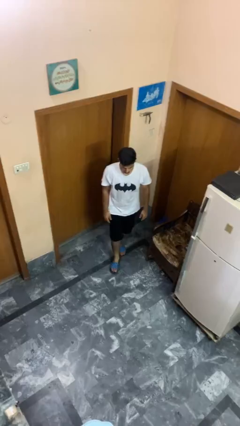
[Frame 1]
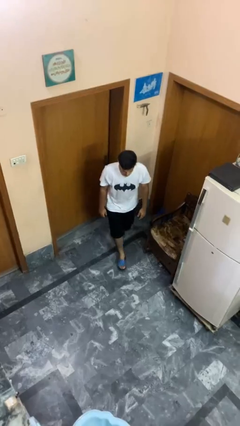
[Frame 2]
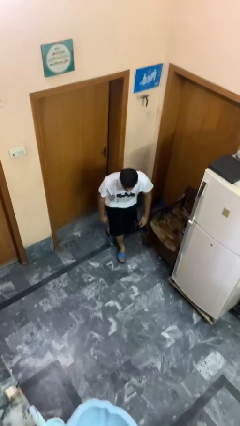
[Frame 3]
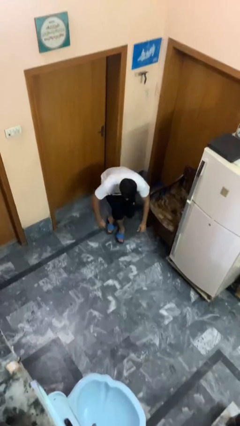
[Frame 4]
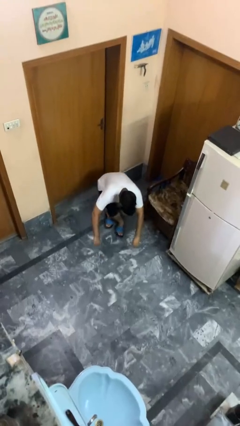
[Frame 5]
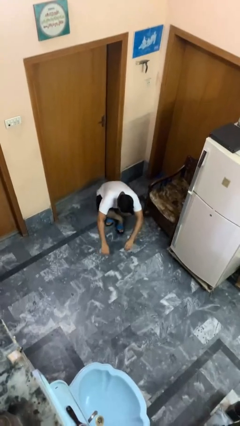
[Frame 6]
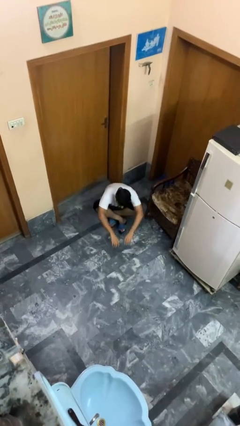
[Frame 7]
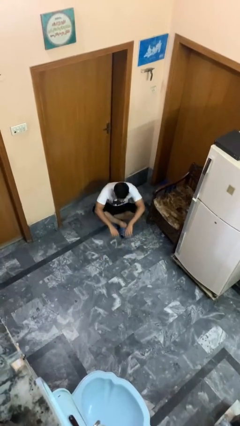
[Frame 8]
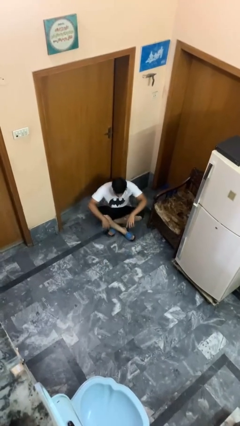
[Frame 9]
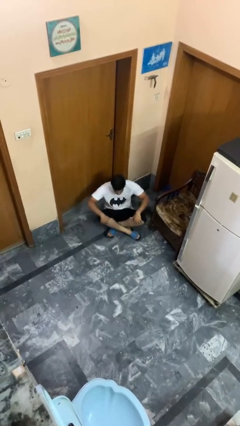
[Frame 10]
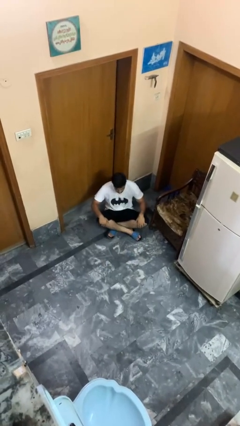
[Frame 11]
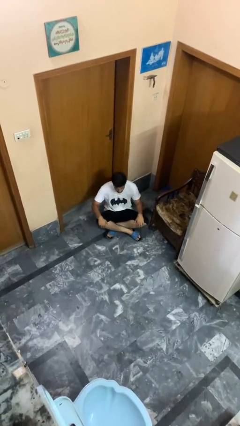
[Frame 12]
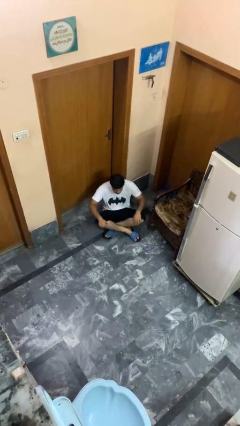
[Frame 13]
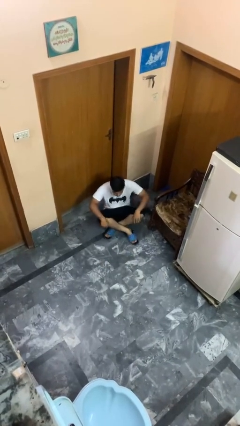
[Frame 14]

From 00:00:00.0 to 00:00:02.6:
person sits crisscross

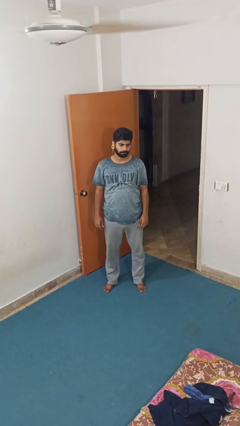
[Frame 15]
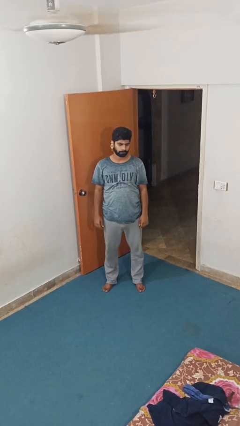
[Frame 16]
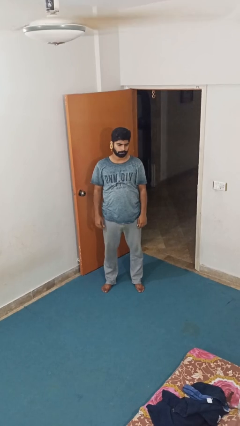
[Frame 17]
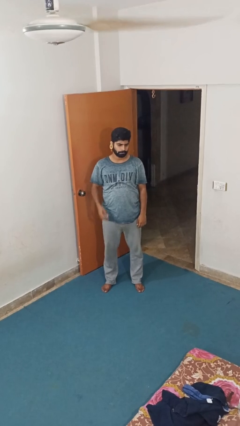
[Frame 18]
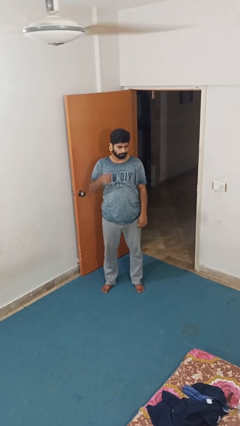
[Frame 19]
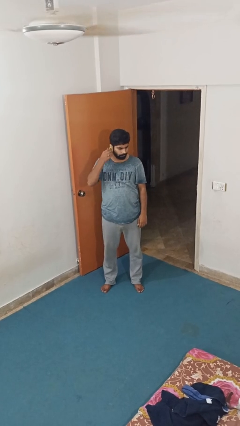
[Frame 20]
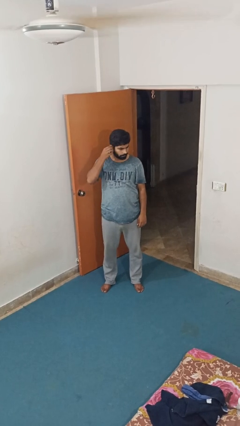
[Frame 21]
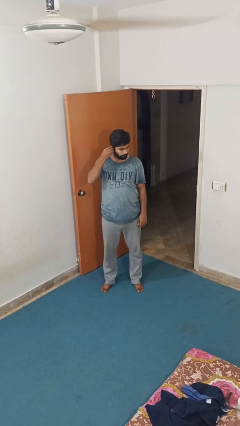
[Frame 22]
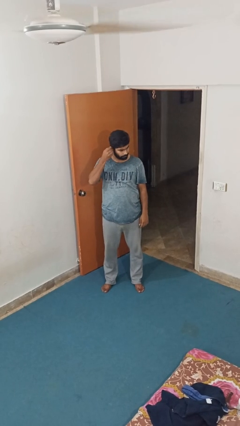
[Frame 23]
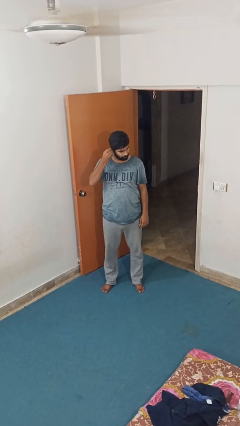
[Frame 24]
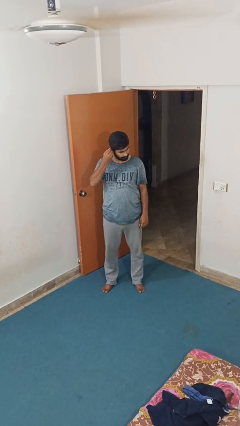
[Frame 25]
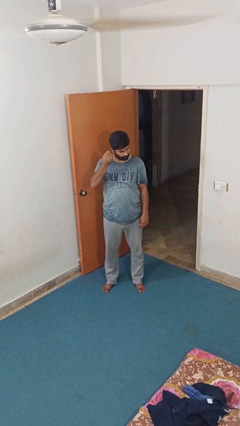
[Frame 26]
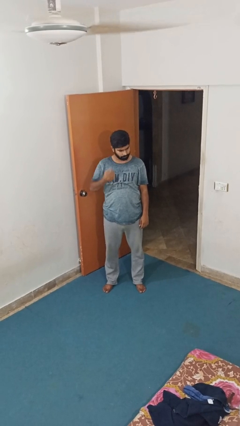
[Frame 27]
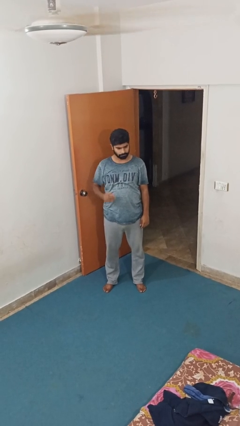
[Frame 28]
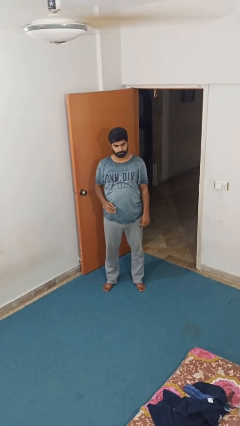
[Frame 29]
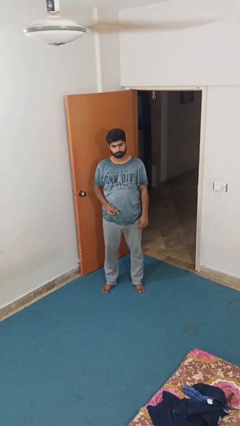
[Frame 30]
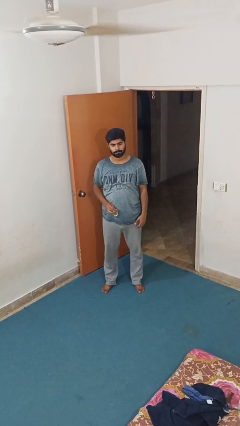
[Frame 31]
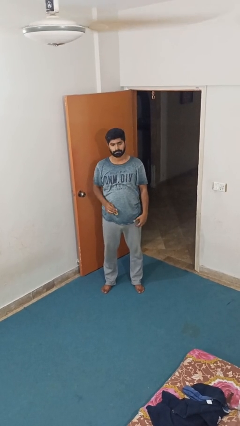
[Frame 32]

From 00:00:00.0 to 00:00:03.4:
person takes off earrings

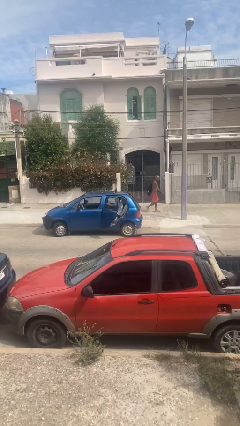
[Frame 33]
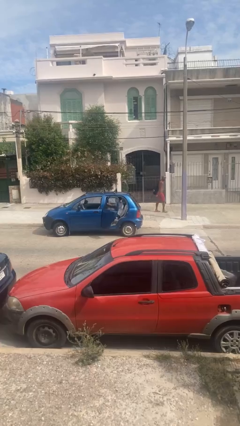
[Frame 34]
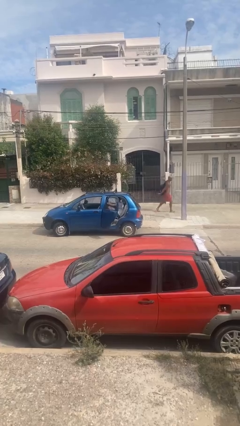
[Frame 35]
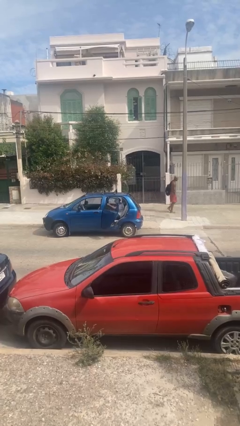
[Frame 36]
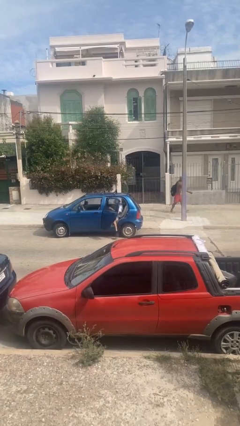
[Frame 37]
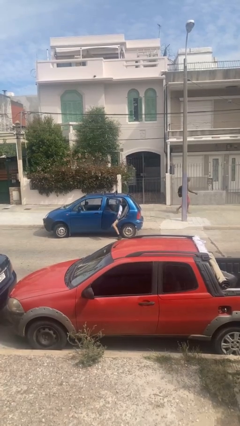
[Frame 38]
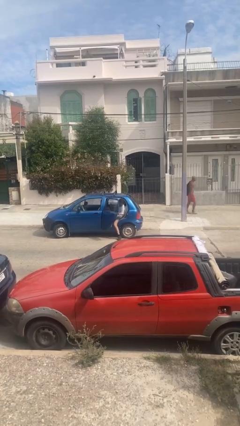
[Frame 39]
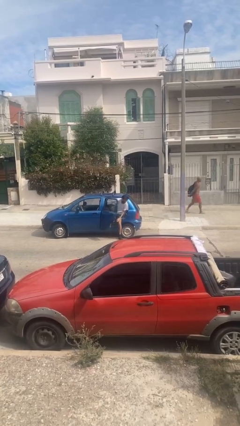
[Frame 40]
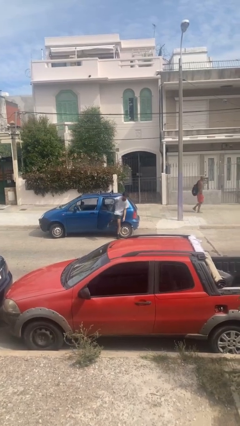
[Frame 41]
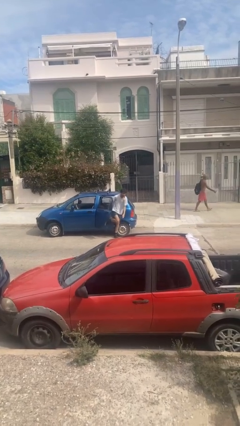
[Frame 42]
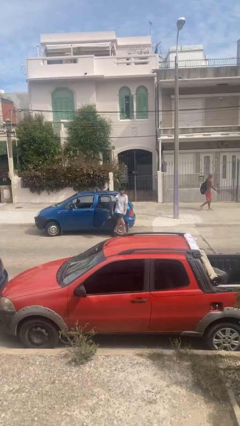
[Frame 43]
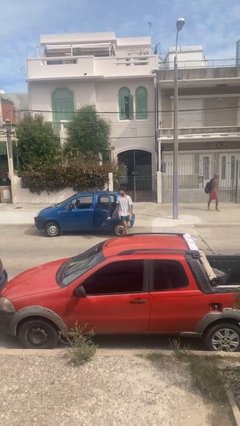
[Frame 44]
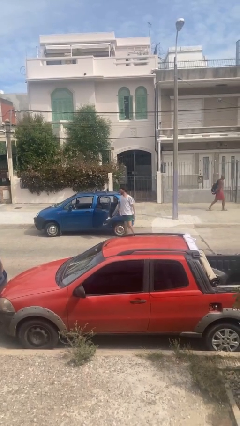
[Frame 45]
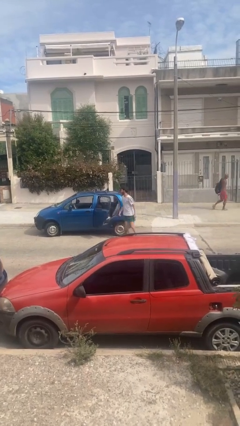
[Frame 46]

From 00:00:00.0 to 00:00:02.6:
person exits car

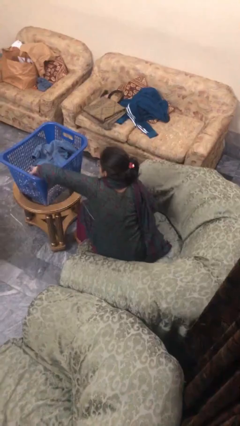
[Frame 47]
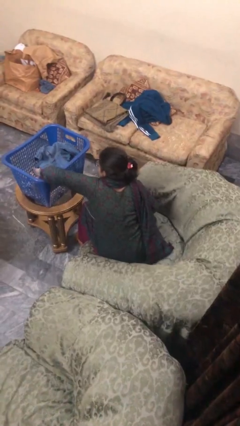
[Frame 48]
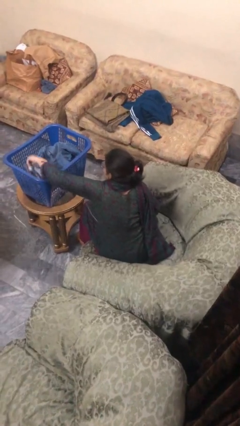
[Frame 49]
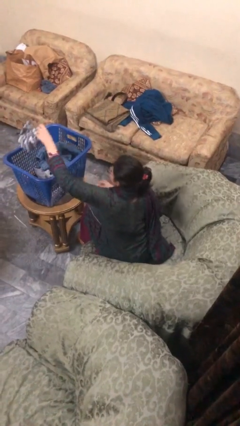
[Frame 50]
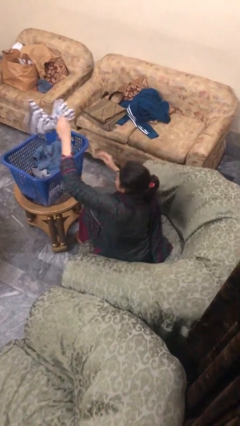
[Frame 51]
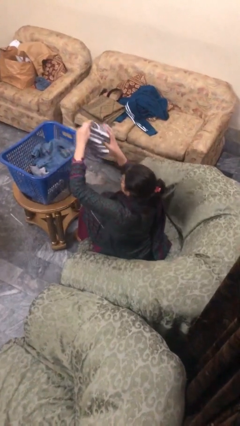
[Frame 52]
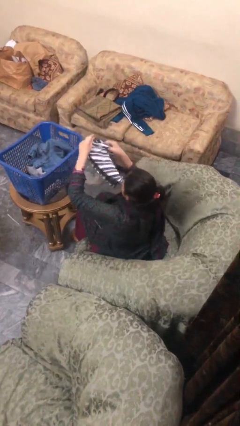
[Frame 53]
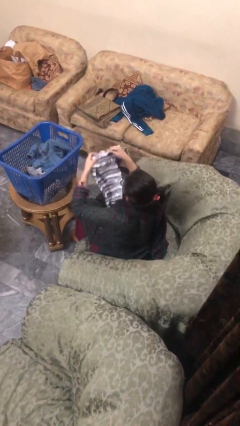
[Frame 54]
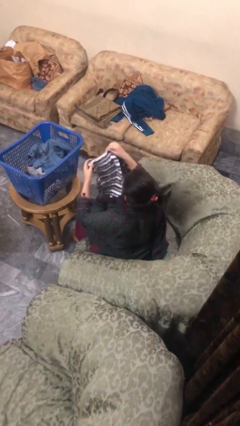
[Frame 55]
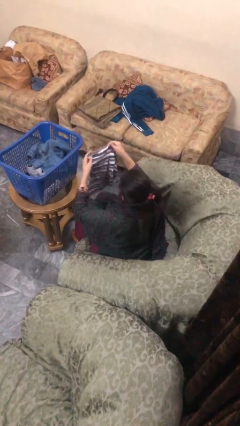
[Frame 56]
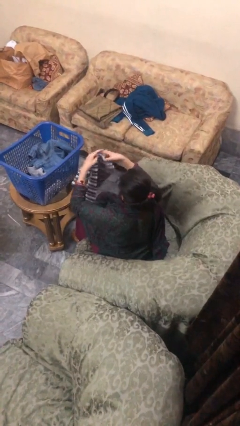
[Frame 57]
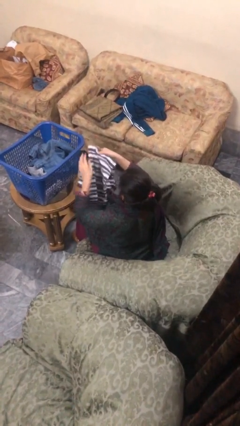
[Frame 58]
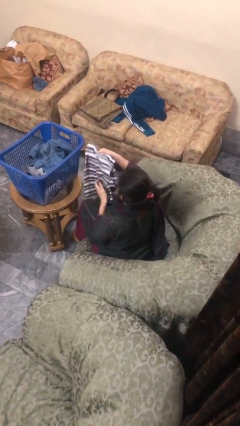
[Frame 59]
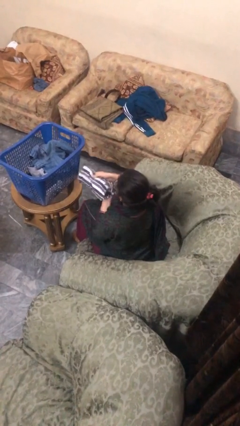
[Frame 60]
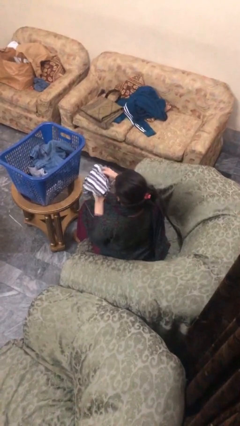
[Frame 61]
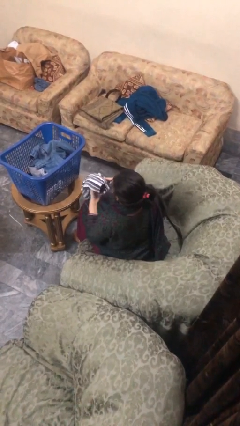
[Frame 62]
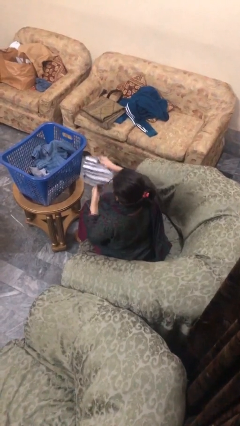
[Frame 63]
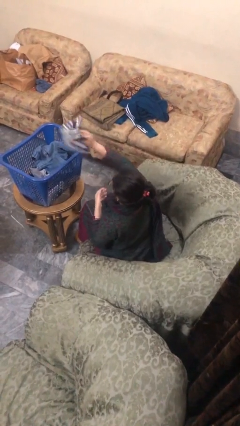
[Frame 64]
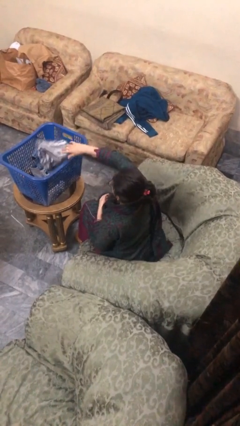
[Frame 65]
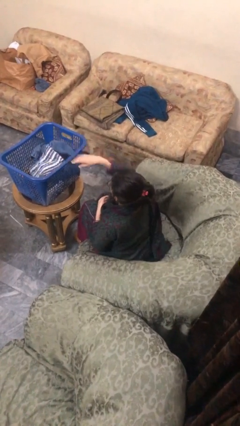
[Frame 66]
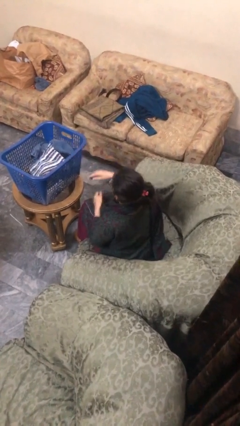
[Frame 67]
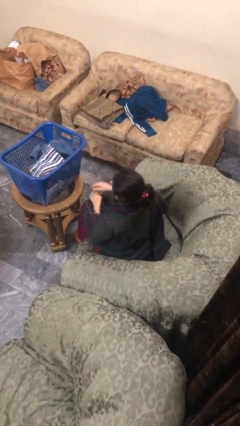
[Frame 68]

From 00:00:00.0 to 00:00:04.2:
person folds shirt

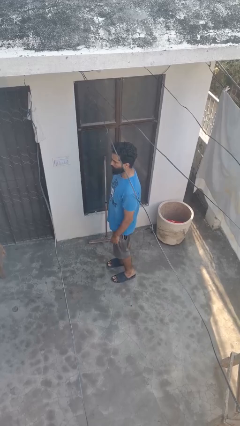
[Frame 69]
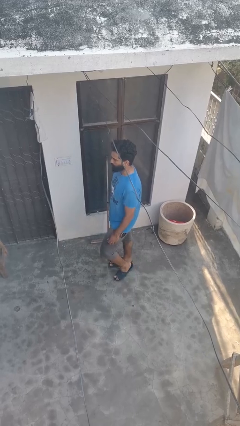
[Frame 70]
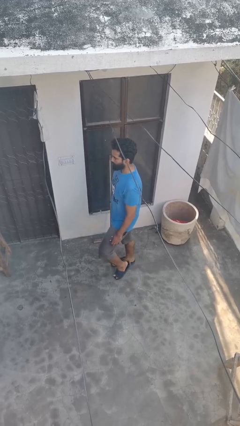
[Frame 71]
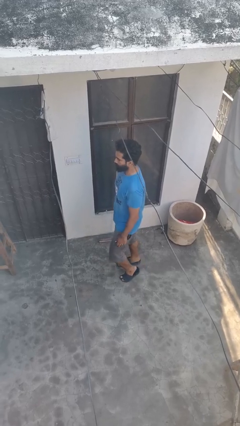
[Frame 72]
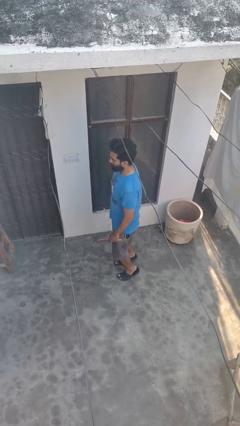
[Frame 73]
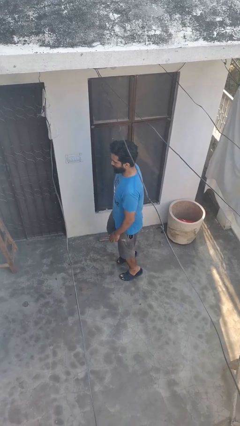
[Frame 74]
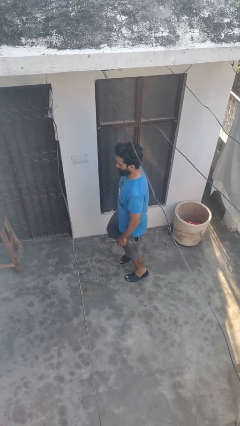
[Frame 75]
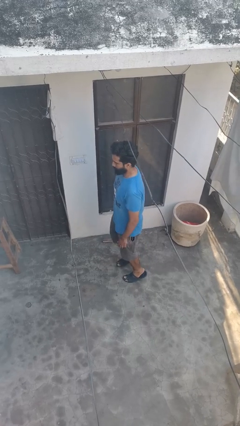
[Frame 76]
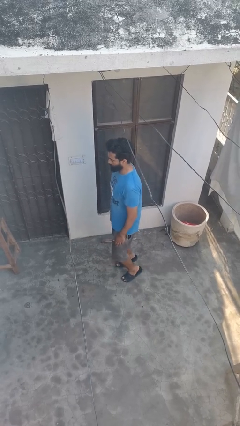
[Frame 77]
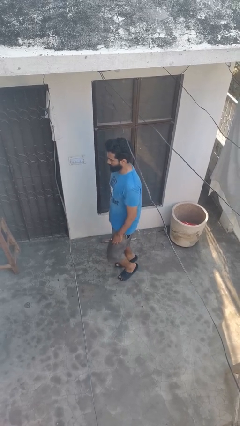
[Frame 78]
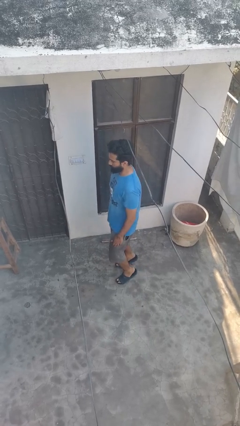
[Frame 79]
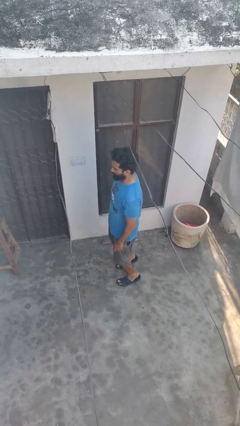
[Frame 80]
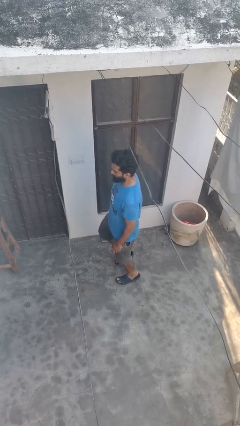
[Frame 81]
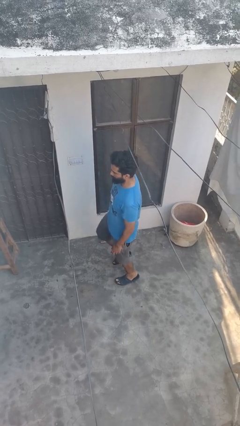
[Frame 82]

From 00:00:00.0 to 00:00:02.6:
person walks tiptoe

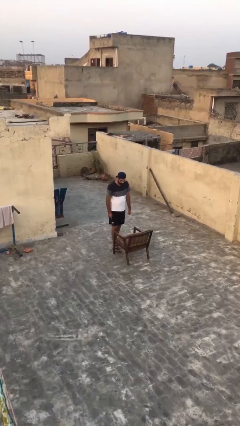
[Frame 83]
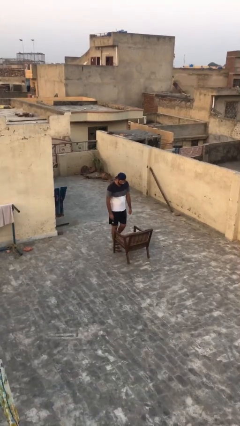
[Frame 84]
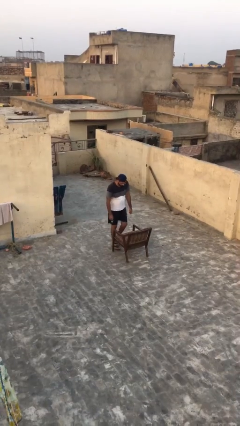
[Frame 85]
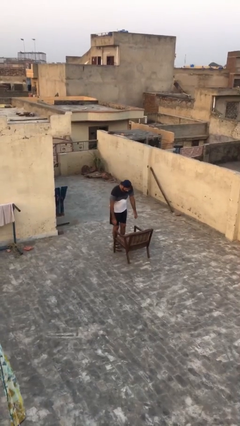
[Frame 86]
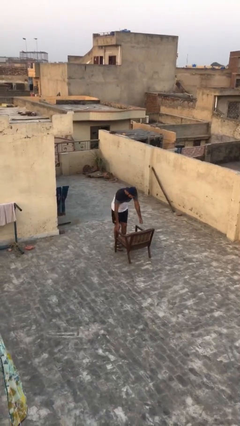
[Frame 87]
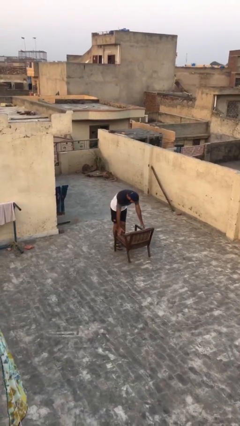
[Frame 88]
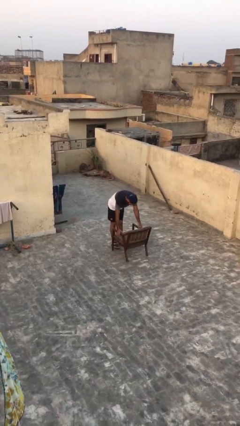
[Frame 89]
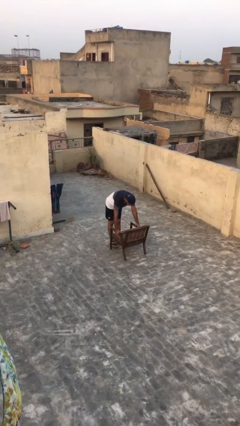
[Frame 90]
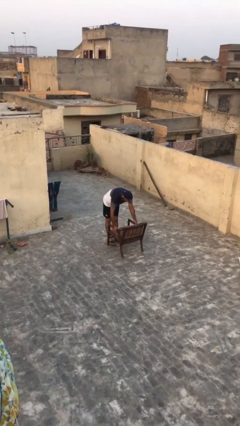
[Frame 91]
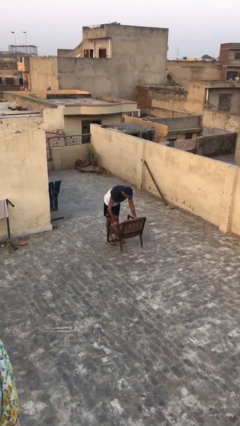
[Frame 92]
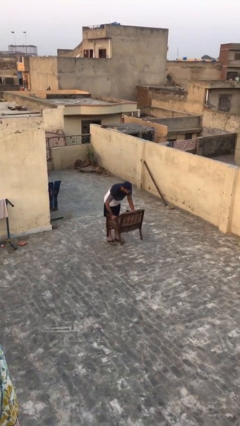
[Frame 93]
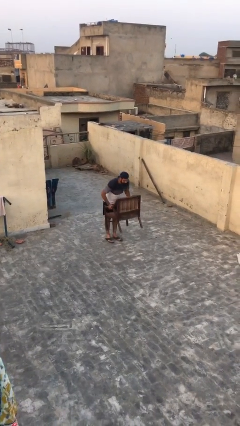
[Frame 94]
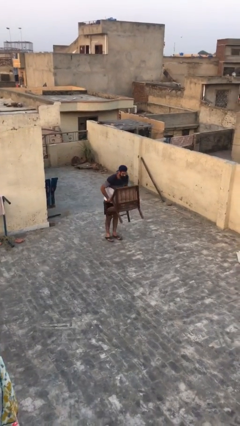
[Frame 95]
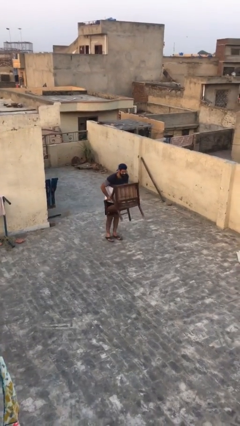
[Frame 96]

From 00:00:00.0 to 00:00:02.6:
person picks up object from floor
